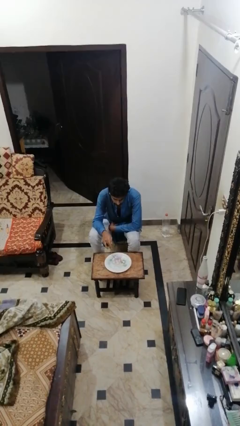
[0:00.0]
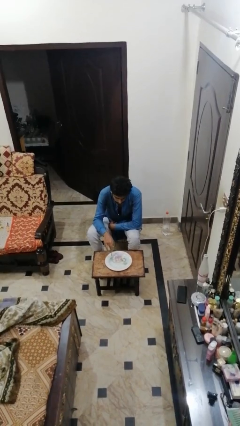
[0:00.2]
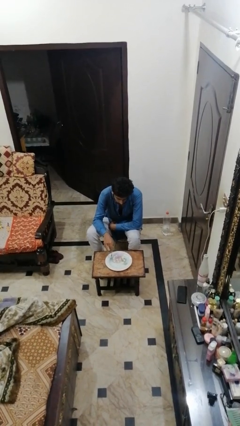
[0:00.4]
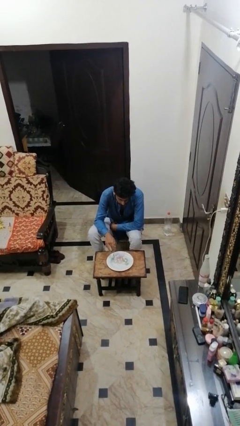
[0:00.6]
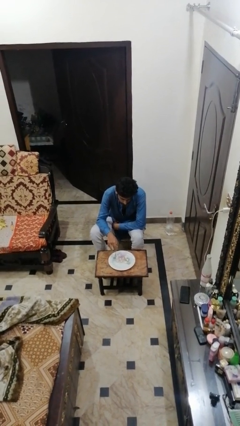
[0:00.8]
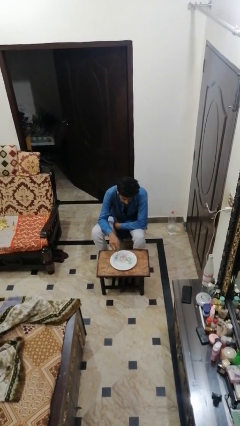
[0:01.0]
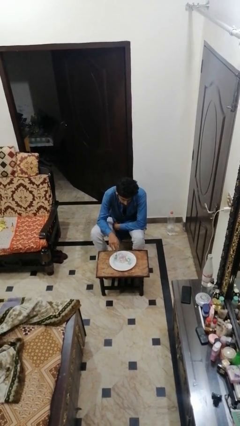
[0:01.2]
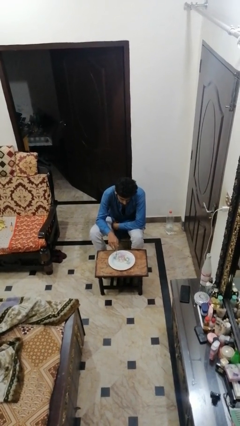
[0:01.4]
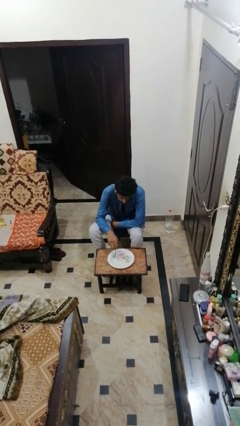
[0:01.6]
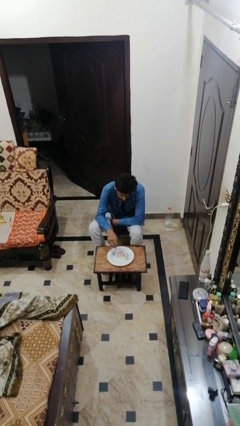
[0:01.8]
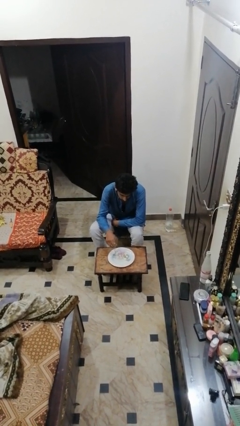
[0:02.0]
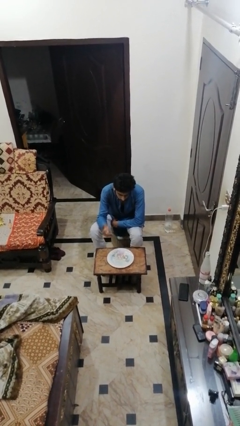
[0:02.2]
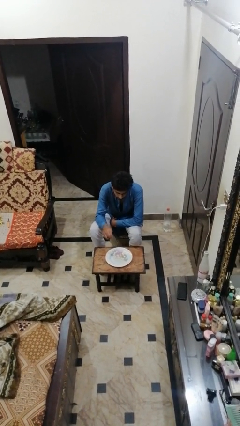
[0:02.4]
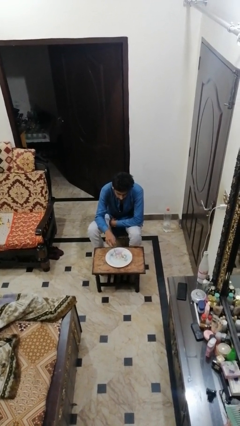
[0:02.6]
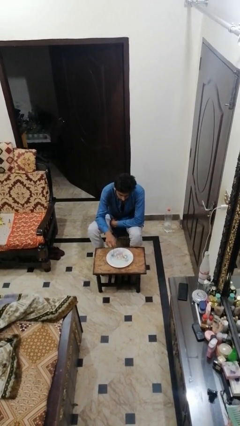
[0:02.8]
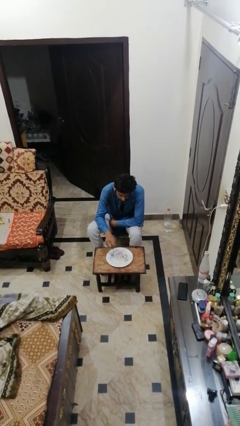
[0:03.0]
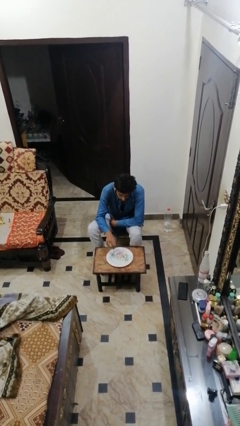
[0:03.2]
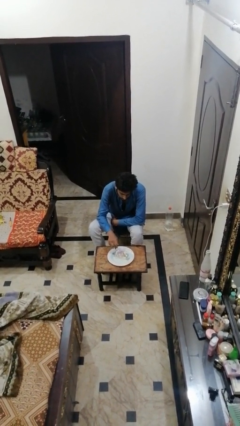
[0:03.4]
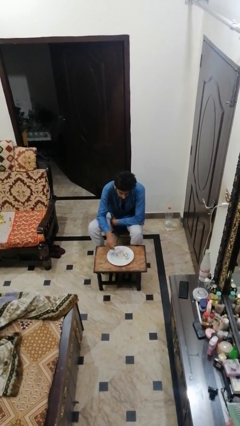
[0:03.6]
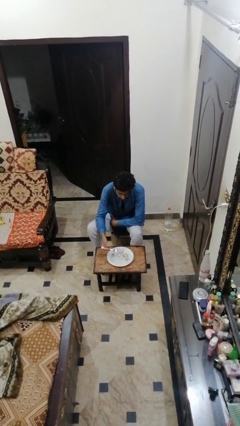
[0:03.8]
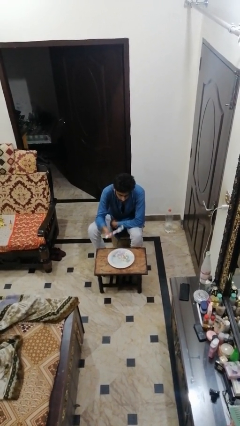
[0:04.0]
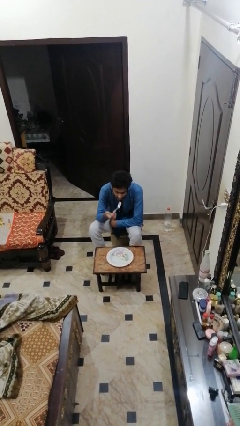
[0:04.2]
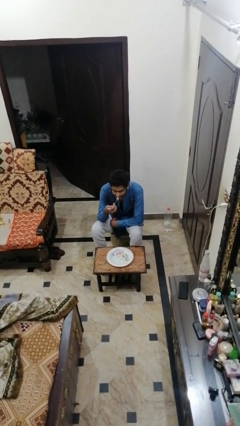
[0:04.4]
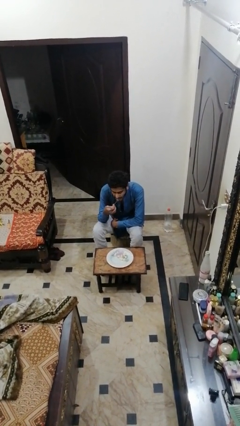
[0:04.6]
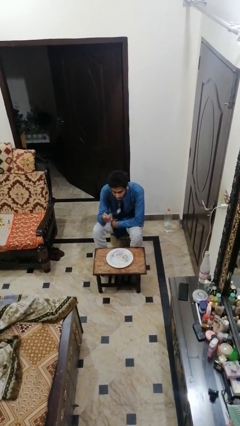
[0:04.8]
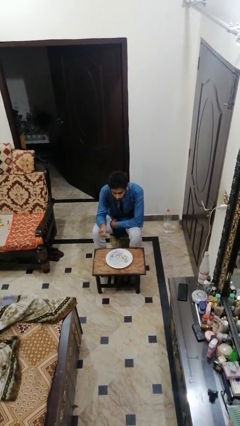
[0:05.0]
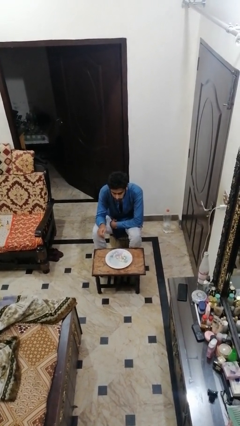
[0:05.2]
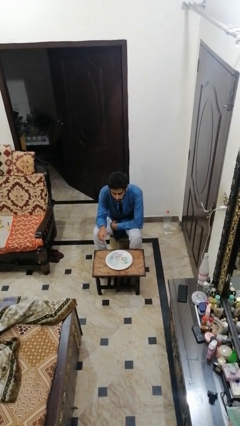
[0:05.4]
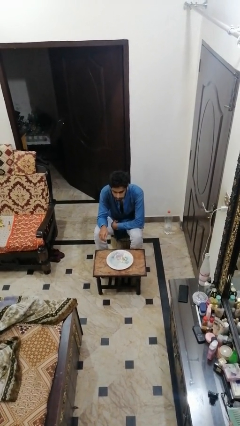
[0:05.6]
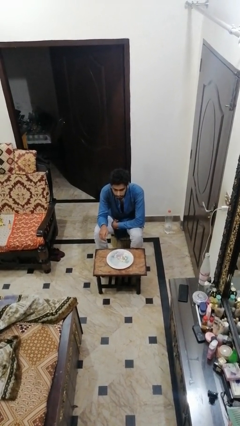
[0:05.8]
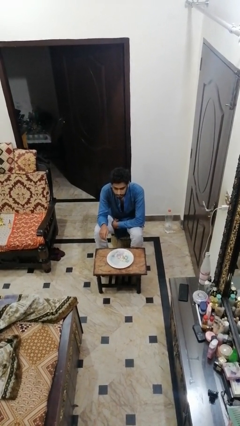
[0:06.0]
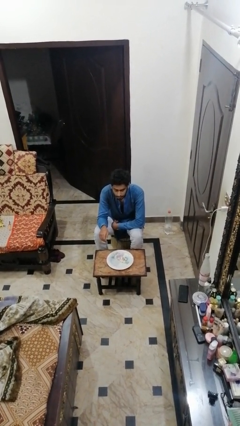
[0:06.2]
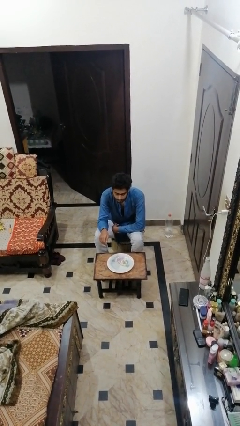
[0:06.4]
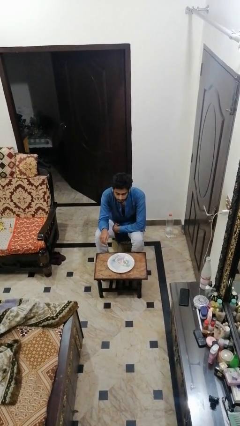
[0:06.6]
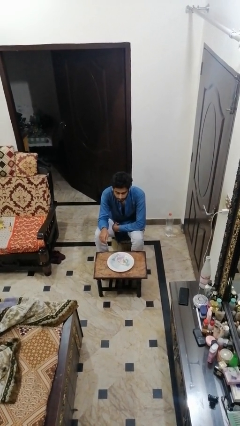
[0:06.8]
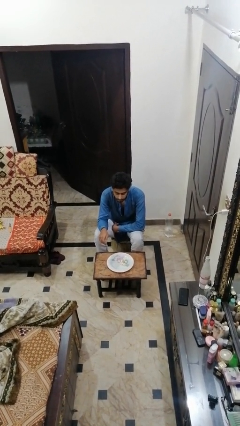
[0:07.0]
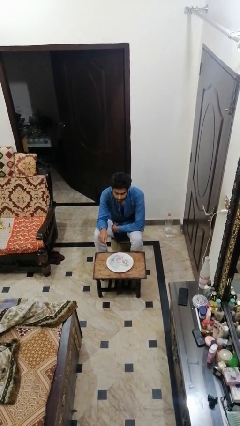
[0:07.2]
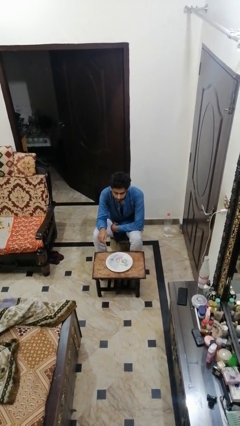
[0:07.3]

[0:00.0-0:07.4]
person eats with utensil

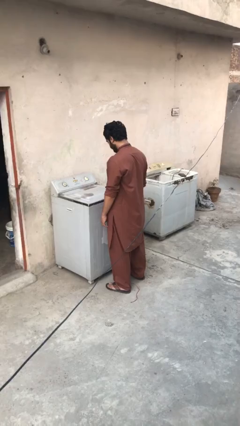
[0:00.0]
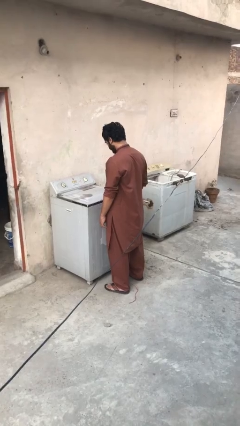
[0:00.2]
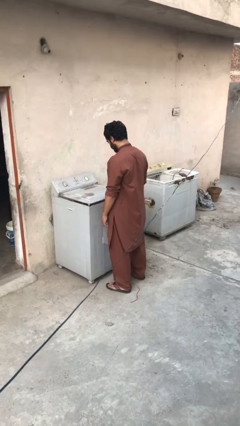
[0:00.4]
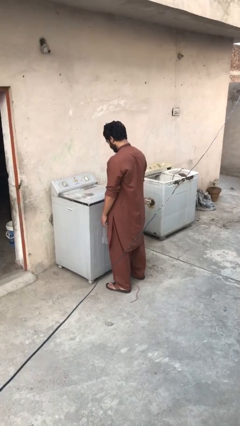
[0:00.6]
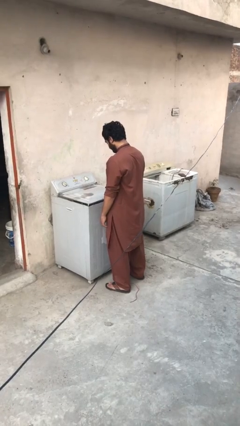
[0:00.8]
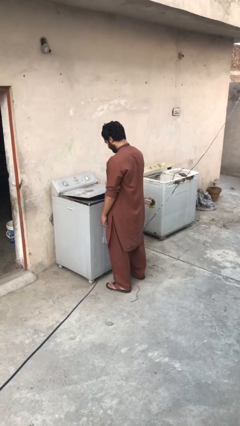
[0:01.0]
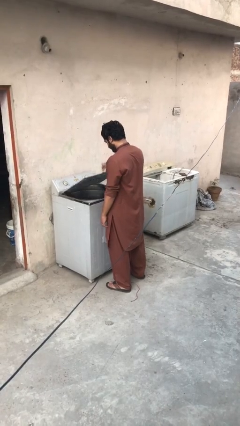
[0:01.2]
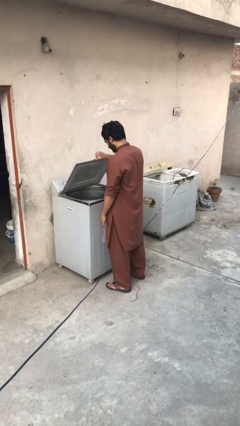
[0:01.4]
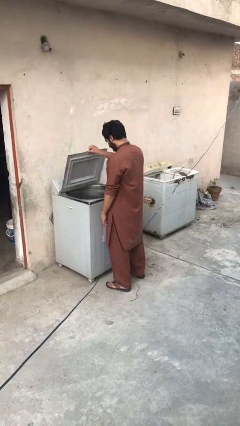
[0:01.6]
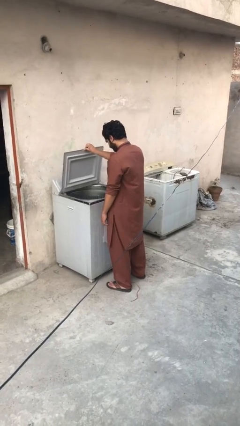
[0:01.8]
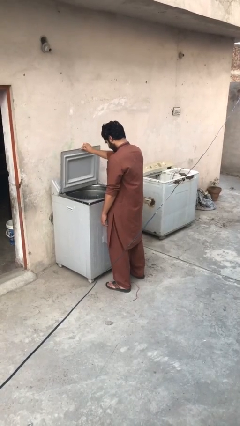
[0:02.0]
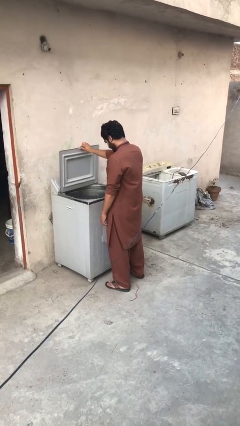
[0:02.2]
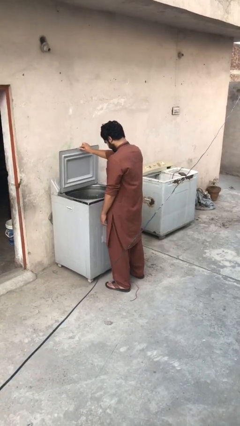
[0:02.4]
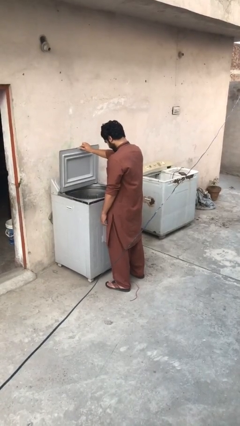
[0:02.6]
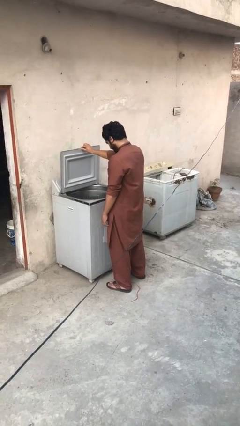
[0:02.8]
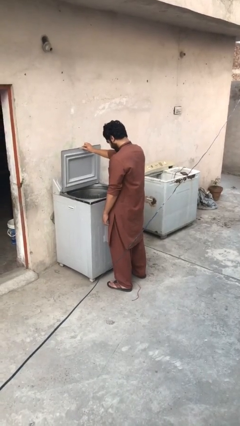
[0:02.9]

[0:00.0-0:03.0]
person opens clothes washer

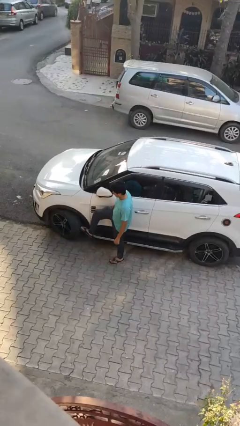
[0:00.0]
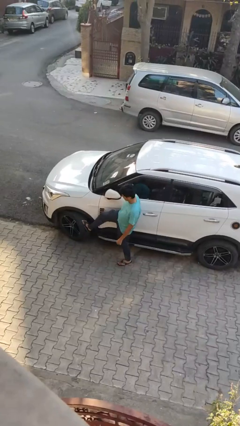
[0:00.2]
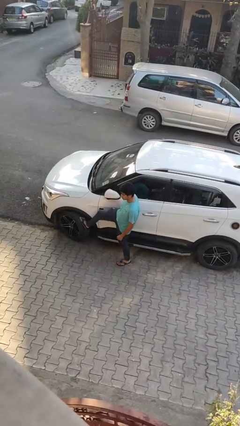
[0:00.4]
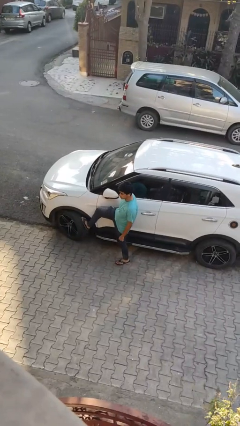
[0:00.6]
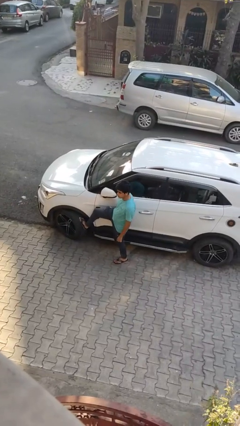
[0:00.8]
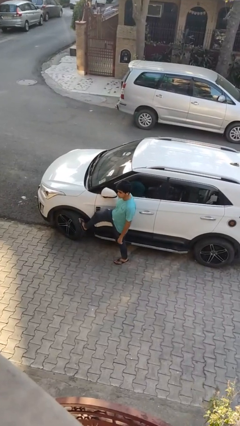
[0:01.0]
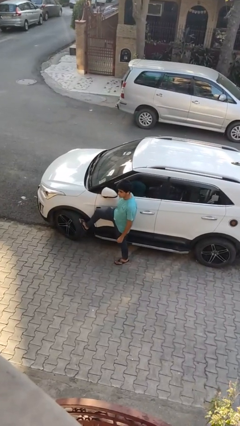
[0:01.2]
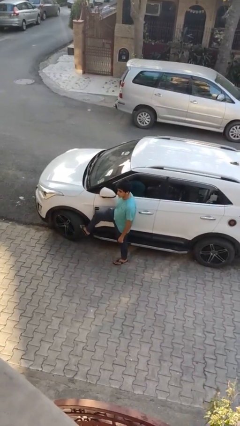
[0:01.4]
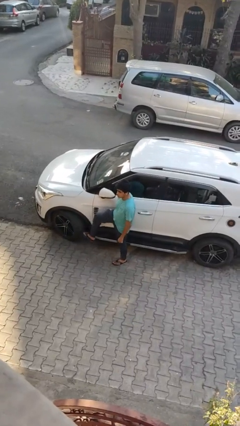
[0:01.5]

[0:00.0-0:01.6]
person kicks car tires

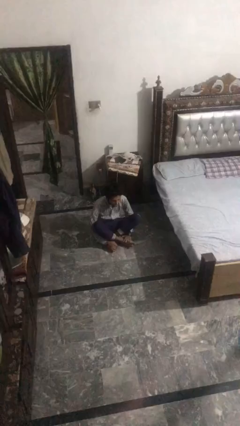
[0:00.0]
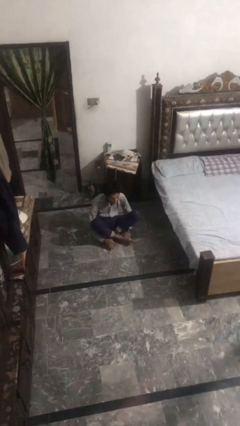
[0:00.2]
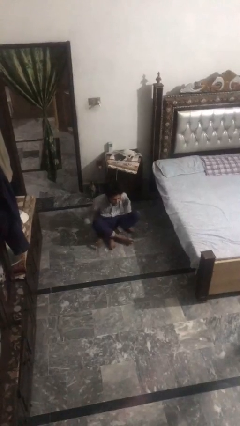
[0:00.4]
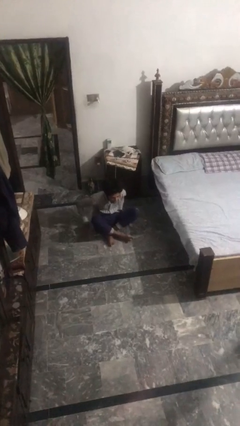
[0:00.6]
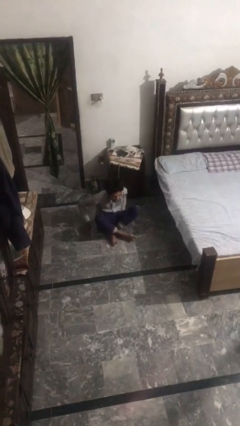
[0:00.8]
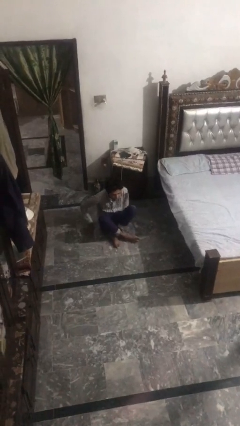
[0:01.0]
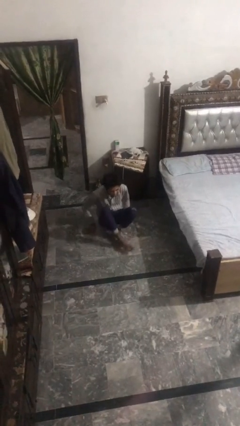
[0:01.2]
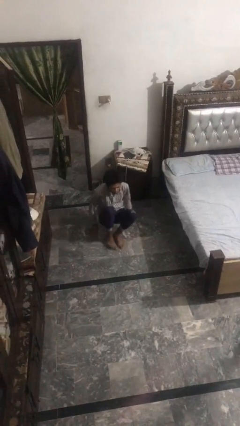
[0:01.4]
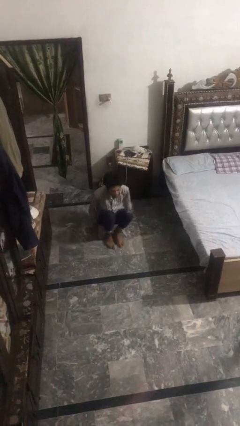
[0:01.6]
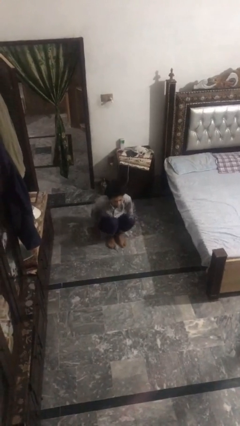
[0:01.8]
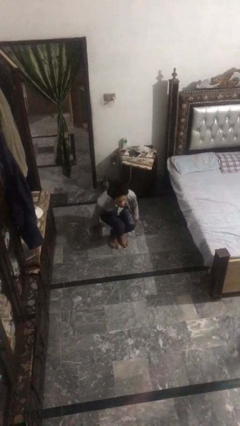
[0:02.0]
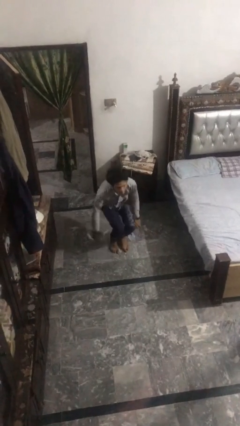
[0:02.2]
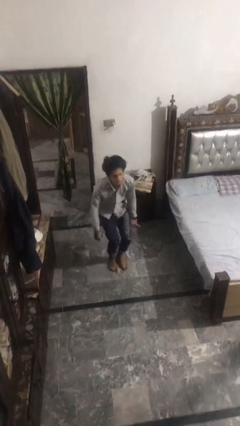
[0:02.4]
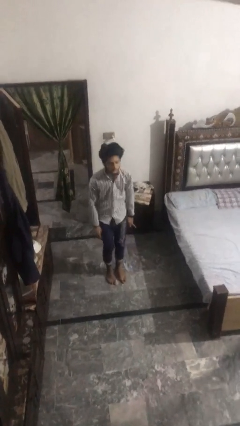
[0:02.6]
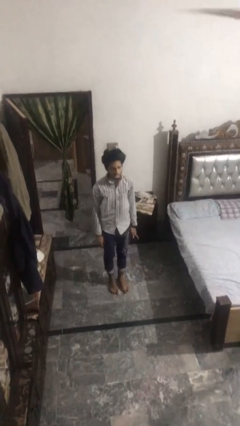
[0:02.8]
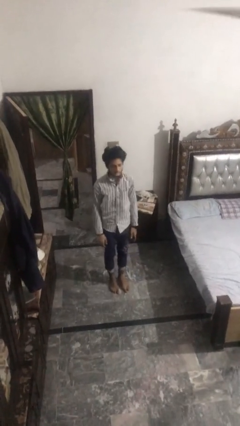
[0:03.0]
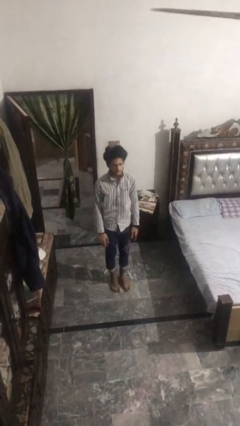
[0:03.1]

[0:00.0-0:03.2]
person stands up from floor

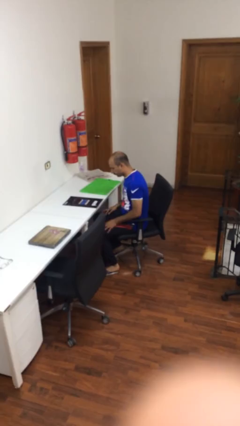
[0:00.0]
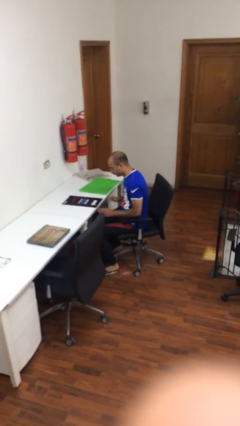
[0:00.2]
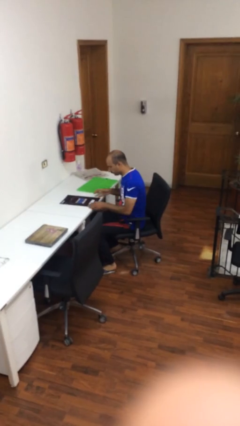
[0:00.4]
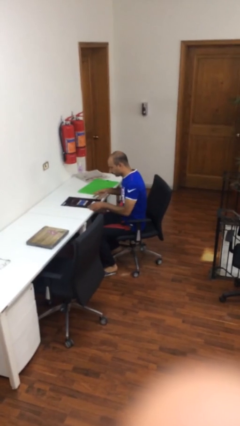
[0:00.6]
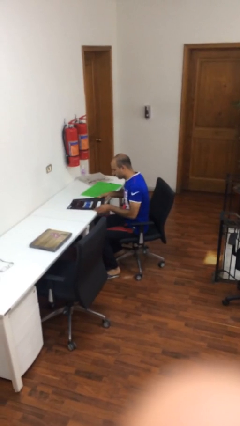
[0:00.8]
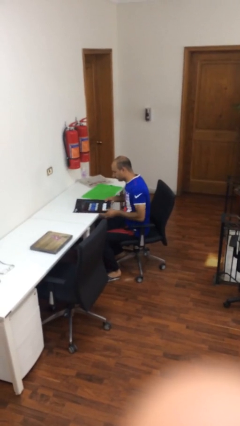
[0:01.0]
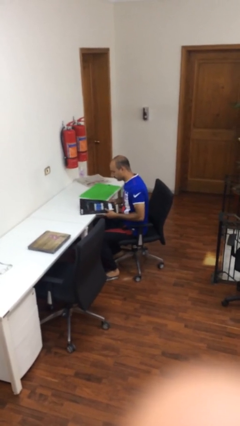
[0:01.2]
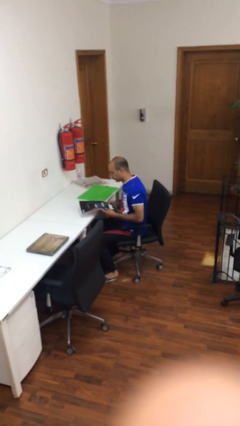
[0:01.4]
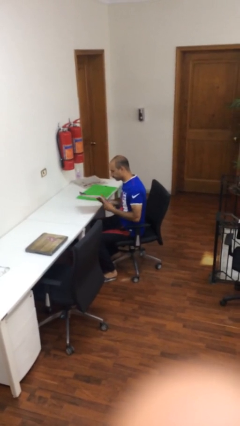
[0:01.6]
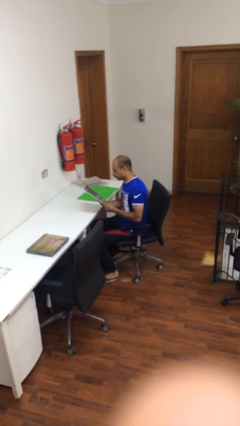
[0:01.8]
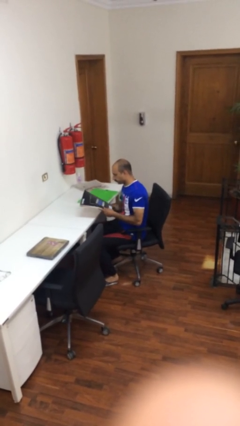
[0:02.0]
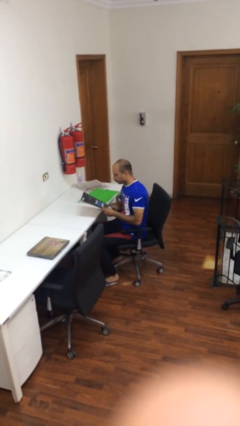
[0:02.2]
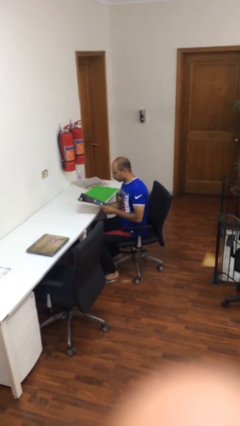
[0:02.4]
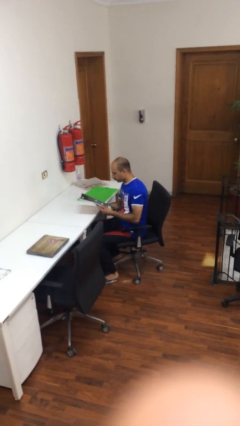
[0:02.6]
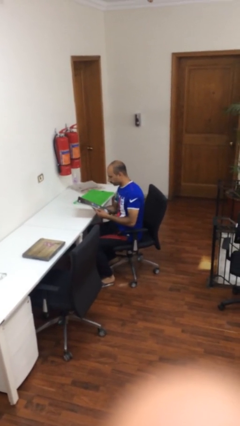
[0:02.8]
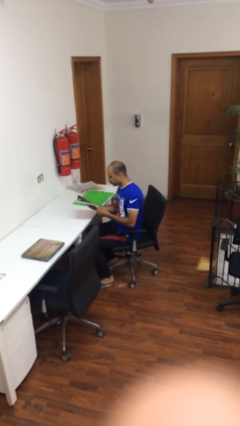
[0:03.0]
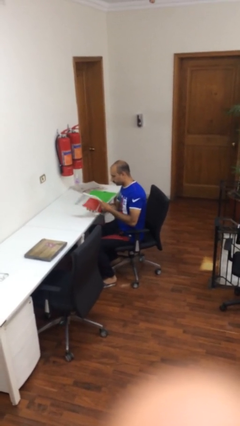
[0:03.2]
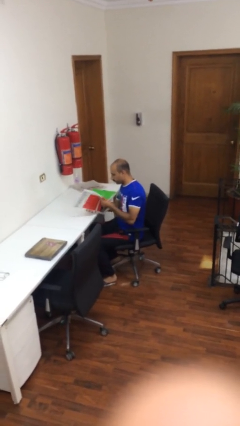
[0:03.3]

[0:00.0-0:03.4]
person picks up object from table
